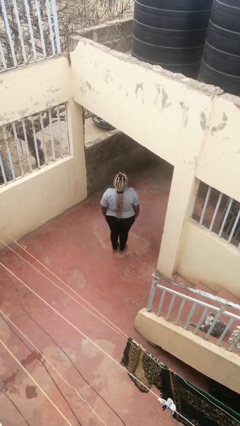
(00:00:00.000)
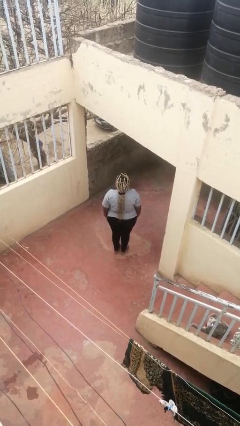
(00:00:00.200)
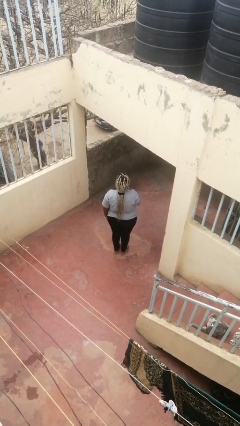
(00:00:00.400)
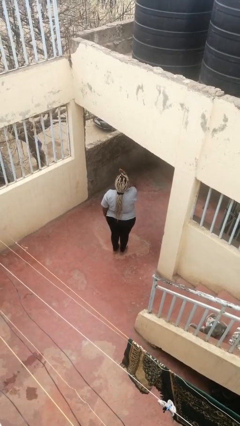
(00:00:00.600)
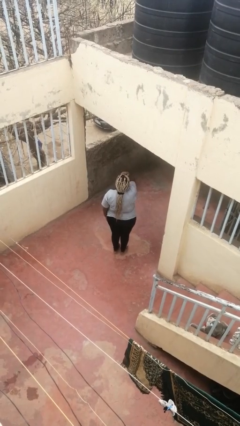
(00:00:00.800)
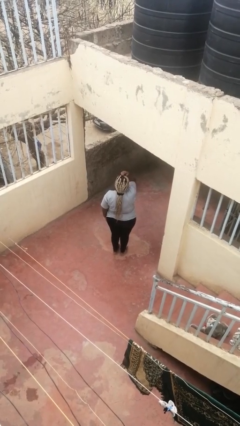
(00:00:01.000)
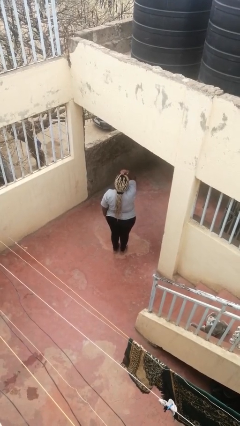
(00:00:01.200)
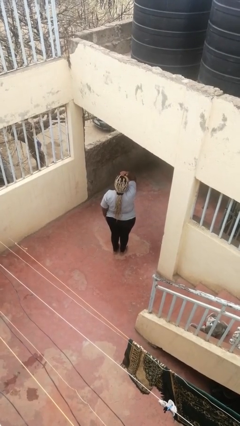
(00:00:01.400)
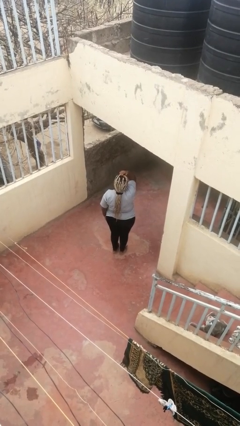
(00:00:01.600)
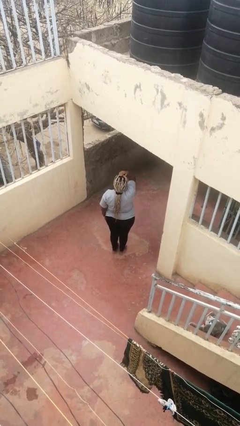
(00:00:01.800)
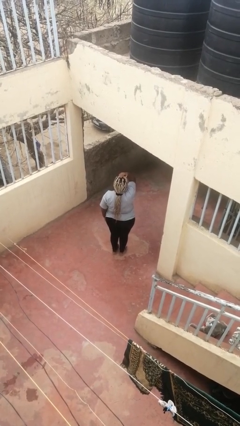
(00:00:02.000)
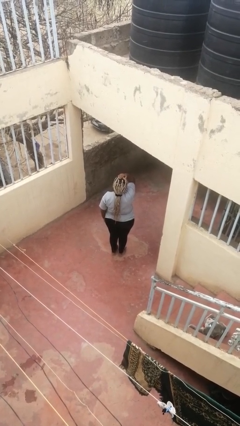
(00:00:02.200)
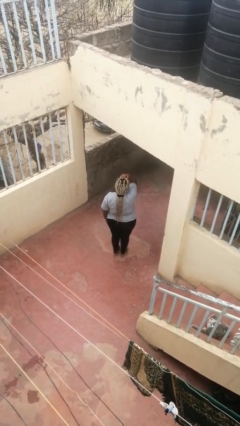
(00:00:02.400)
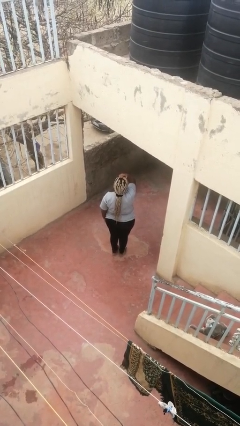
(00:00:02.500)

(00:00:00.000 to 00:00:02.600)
person pats head

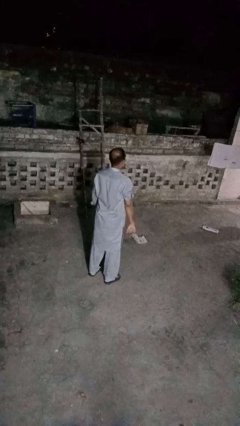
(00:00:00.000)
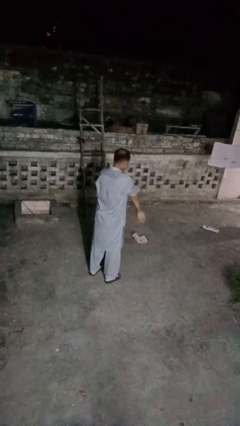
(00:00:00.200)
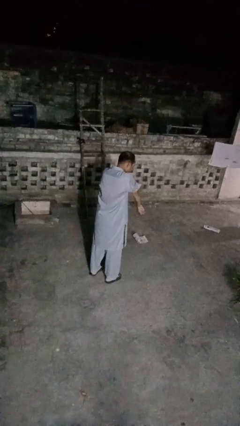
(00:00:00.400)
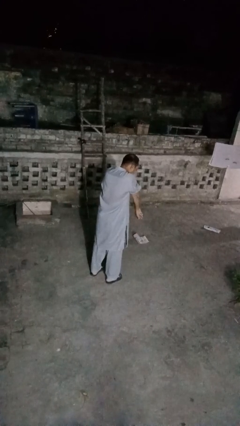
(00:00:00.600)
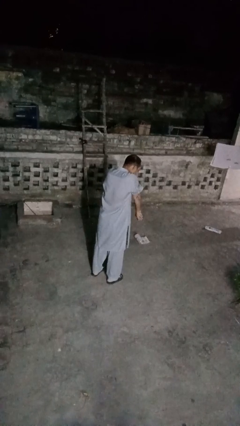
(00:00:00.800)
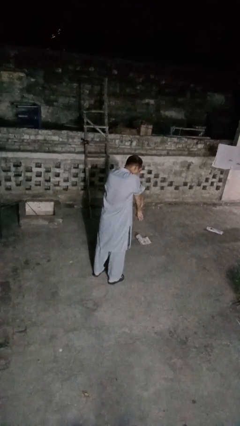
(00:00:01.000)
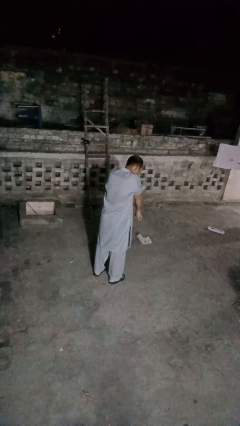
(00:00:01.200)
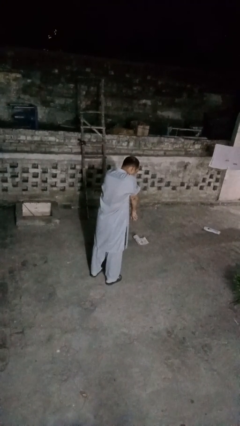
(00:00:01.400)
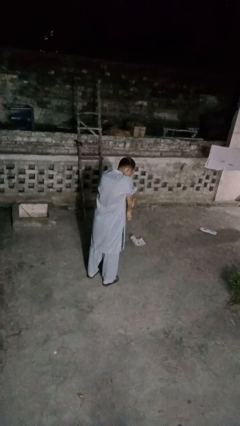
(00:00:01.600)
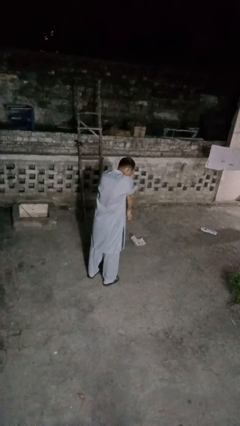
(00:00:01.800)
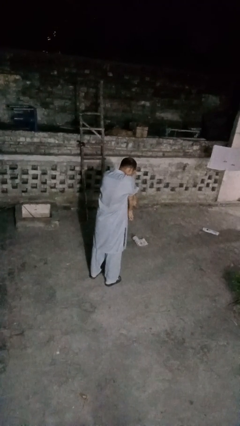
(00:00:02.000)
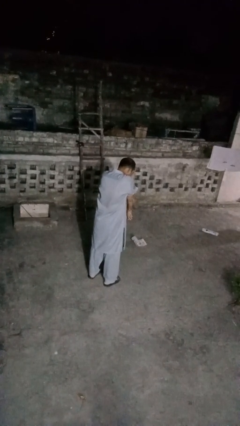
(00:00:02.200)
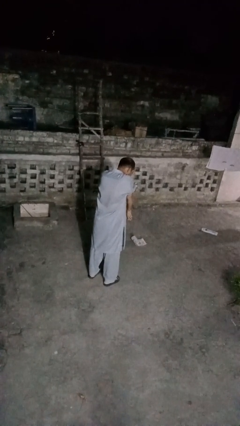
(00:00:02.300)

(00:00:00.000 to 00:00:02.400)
person swats bug

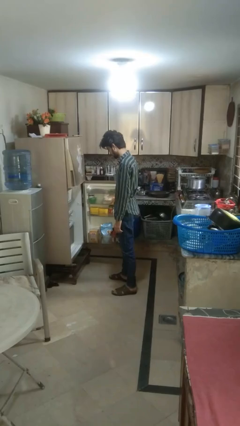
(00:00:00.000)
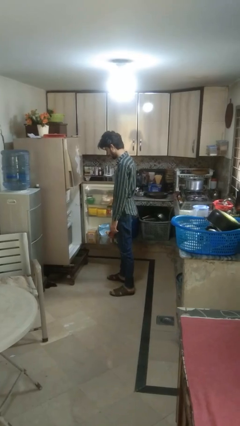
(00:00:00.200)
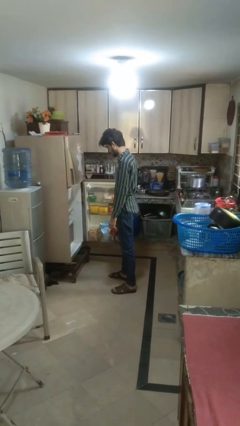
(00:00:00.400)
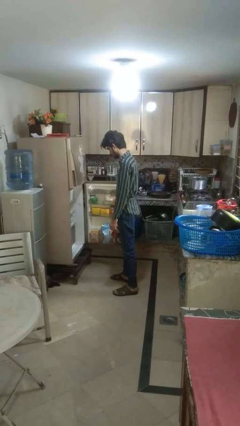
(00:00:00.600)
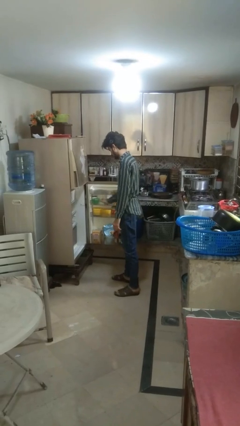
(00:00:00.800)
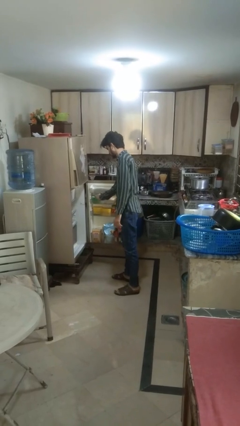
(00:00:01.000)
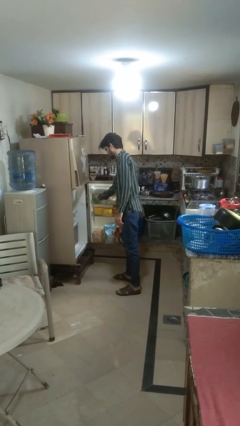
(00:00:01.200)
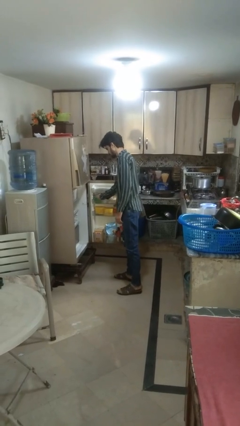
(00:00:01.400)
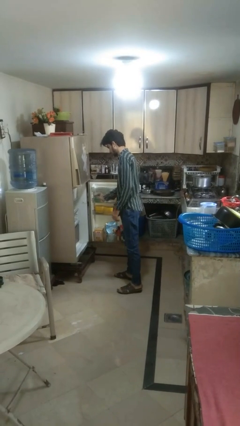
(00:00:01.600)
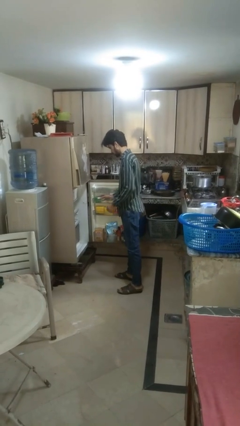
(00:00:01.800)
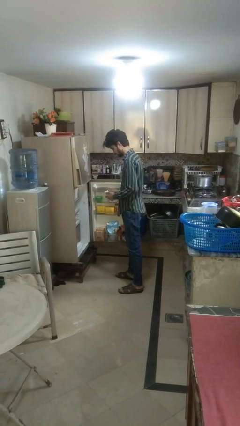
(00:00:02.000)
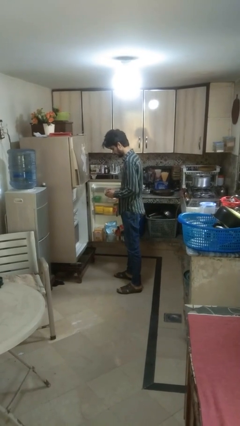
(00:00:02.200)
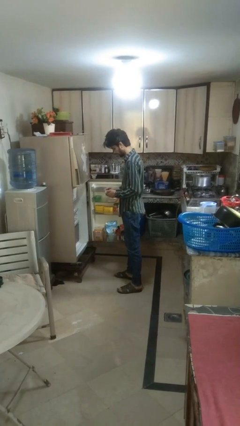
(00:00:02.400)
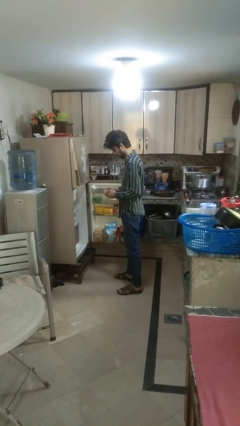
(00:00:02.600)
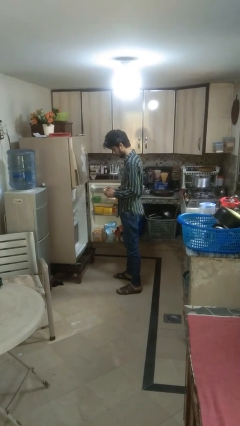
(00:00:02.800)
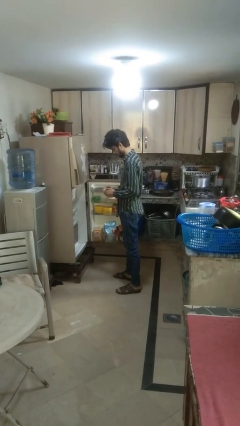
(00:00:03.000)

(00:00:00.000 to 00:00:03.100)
person takes object from refrigerator

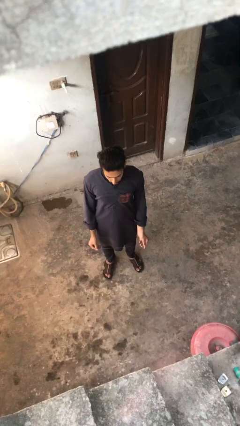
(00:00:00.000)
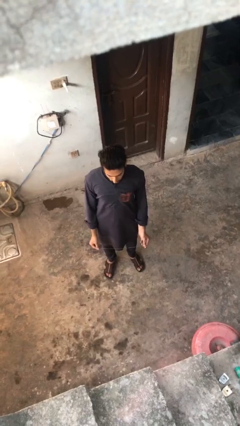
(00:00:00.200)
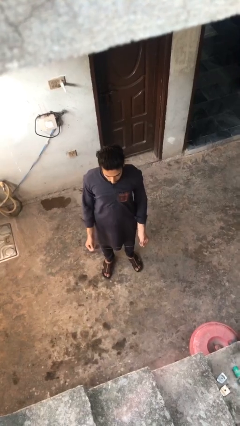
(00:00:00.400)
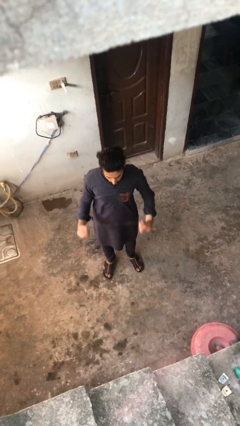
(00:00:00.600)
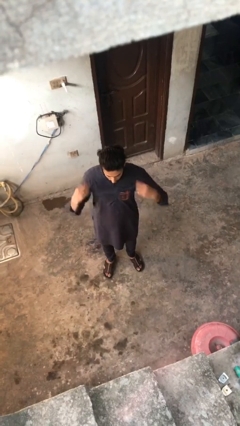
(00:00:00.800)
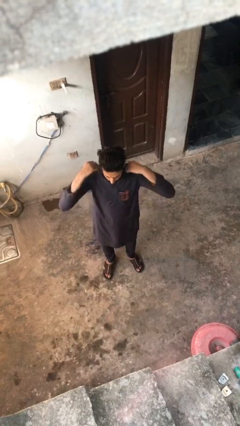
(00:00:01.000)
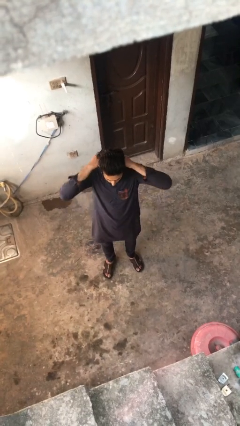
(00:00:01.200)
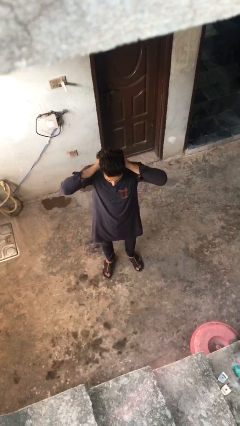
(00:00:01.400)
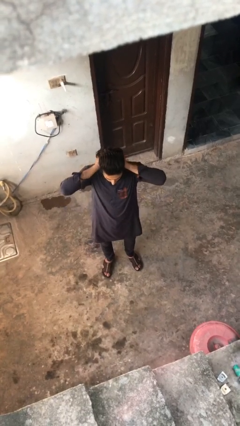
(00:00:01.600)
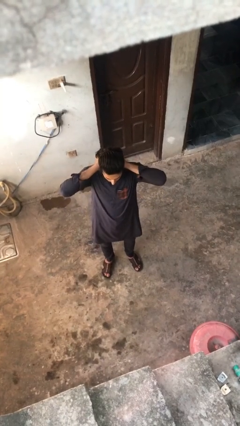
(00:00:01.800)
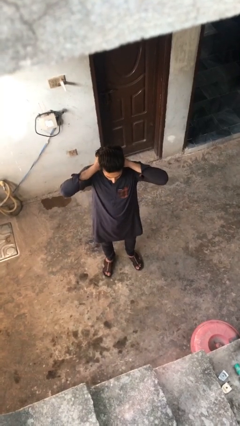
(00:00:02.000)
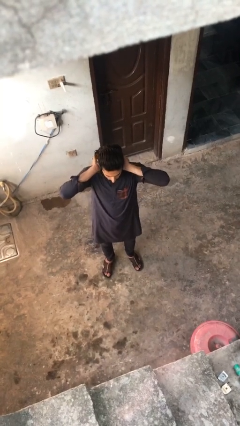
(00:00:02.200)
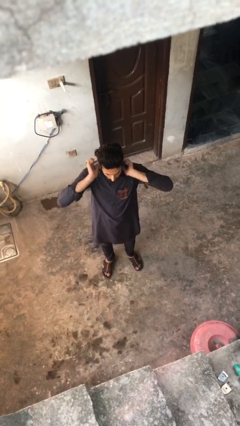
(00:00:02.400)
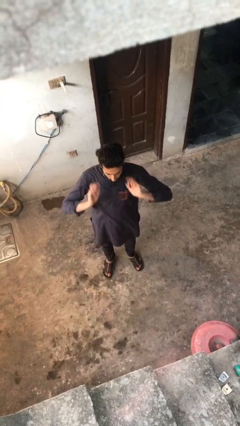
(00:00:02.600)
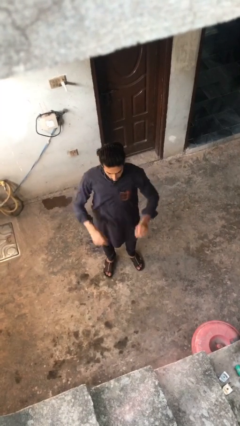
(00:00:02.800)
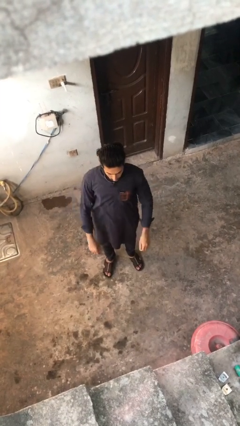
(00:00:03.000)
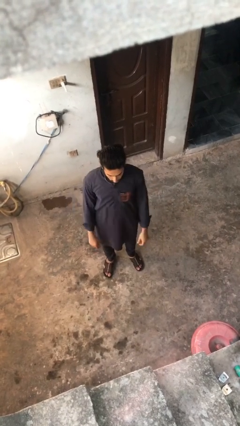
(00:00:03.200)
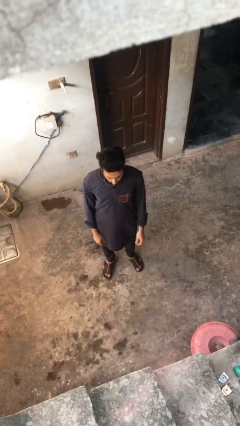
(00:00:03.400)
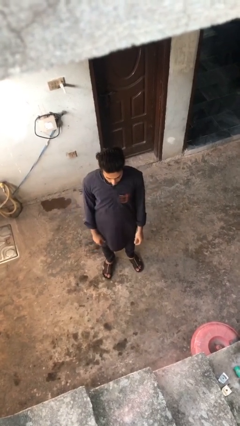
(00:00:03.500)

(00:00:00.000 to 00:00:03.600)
person puts on necklace

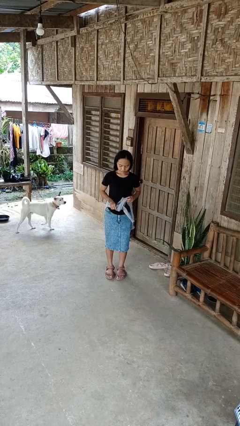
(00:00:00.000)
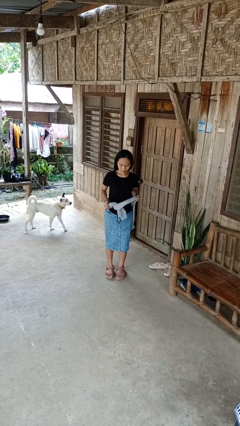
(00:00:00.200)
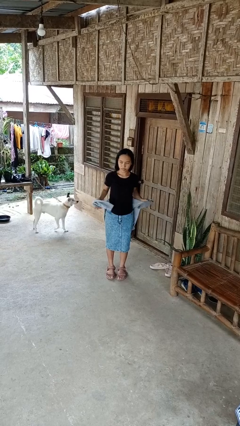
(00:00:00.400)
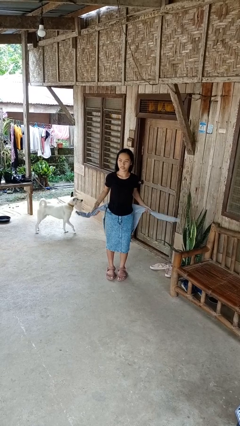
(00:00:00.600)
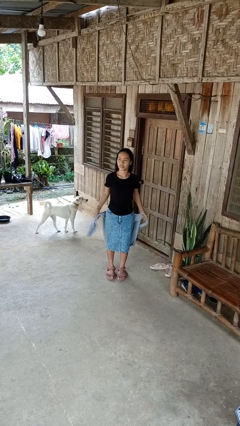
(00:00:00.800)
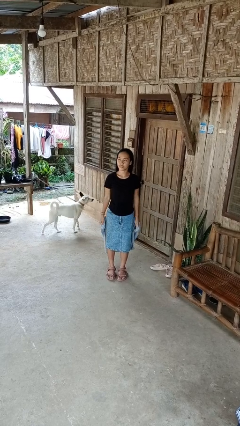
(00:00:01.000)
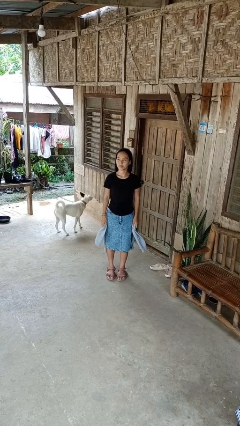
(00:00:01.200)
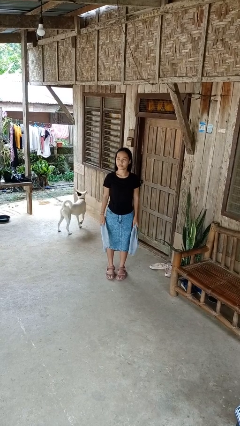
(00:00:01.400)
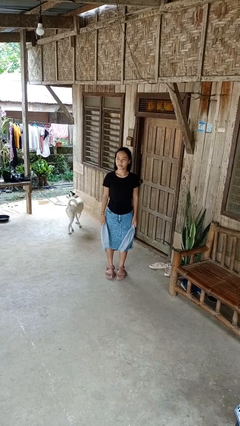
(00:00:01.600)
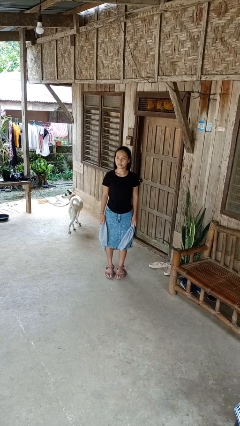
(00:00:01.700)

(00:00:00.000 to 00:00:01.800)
person unties jacket around waist

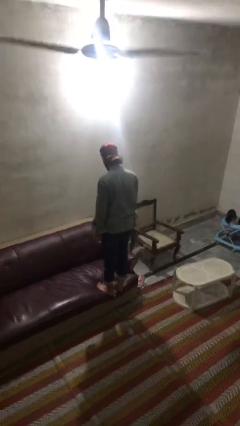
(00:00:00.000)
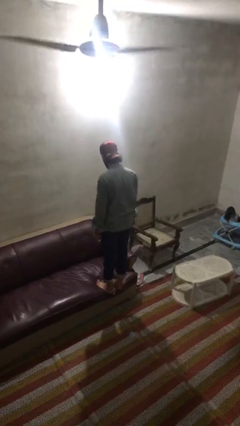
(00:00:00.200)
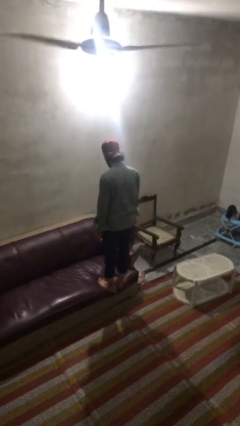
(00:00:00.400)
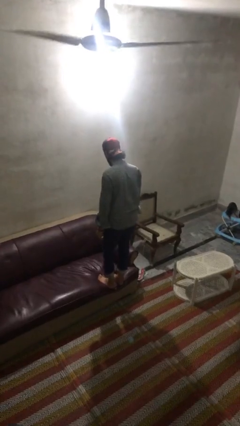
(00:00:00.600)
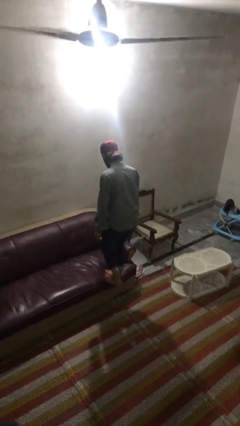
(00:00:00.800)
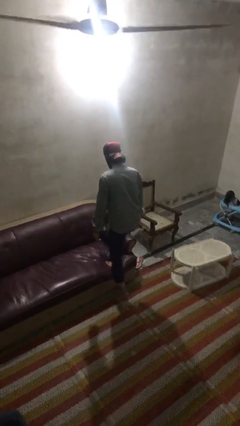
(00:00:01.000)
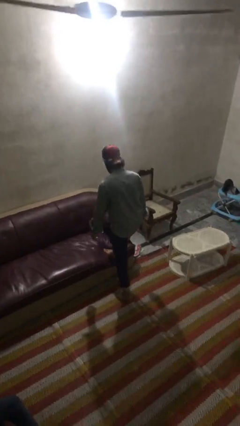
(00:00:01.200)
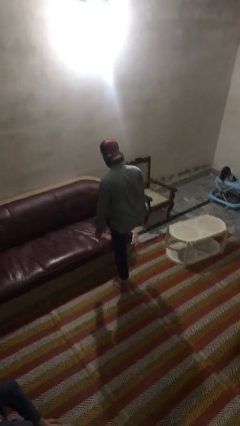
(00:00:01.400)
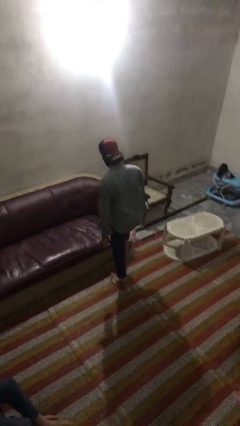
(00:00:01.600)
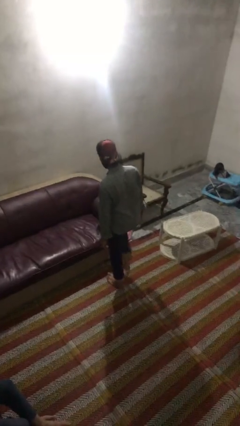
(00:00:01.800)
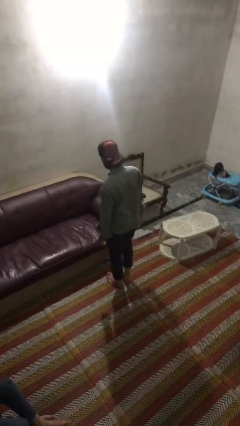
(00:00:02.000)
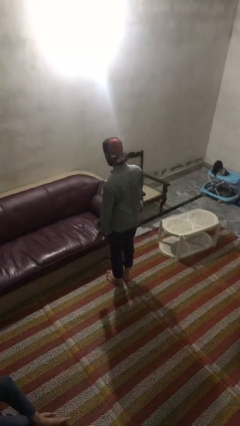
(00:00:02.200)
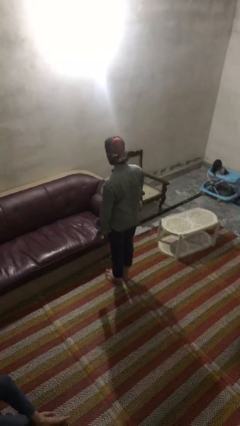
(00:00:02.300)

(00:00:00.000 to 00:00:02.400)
person climbs off couch

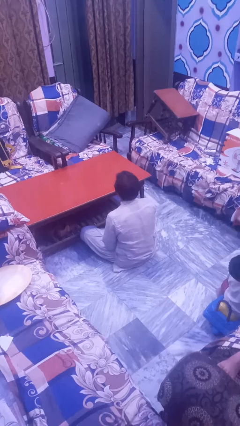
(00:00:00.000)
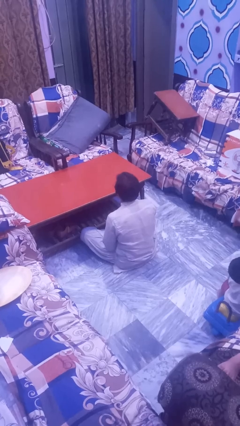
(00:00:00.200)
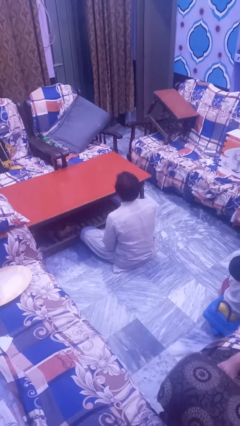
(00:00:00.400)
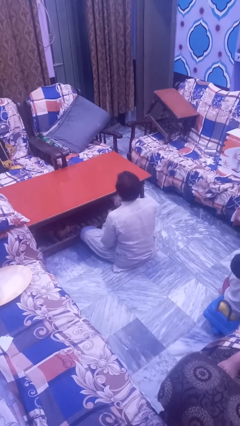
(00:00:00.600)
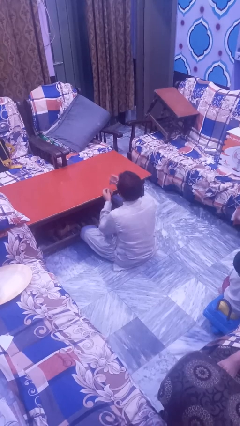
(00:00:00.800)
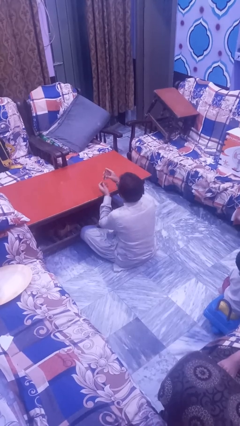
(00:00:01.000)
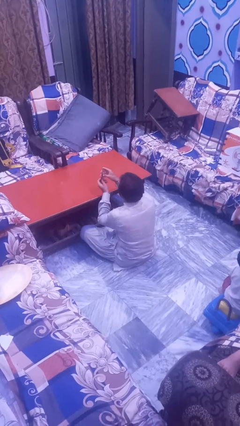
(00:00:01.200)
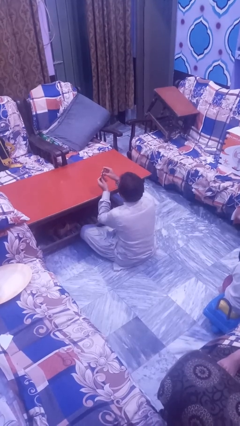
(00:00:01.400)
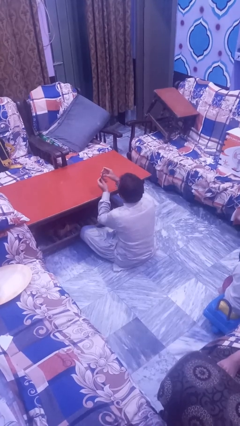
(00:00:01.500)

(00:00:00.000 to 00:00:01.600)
person clips fingernails
